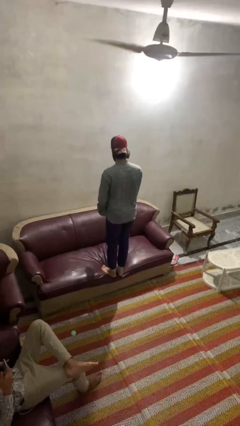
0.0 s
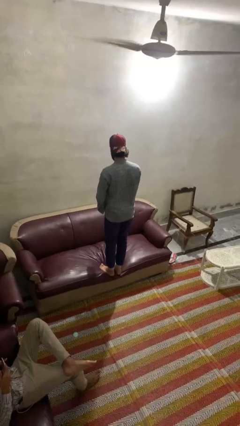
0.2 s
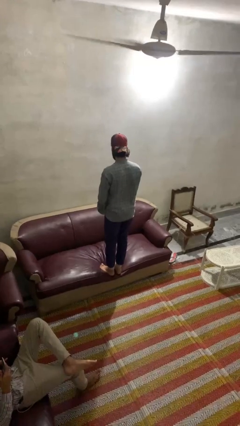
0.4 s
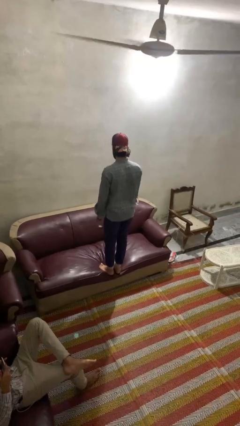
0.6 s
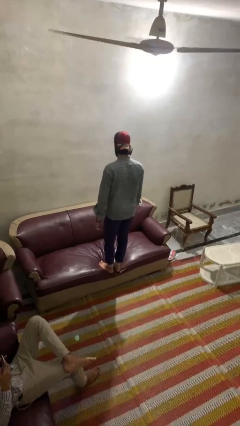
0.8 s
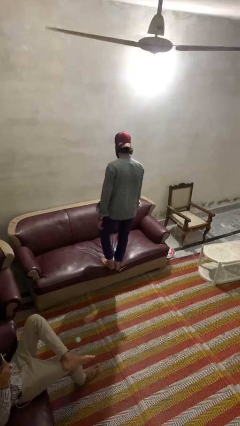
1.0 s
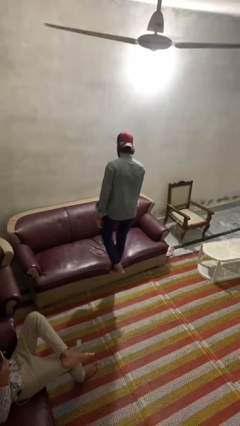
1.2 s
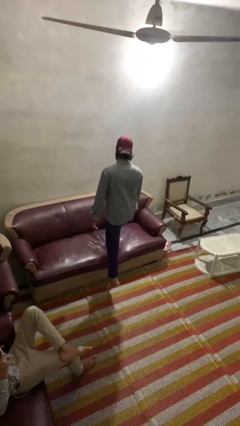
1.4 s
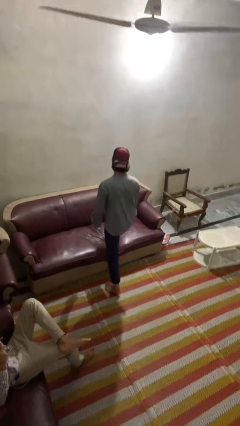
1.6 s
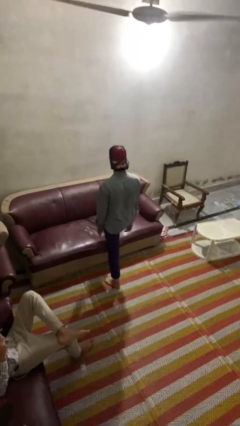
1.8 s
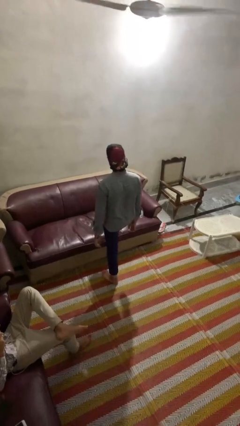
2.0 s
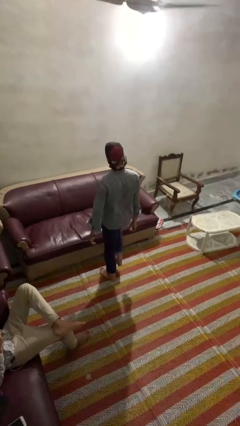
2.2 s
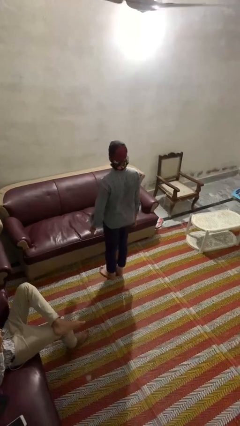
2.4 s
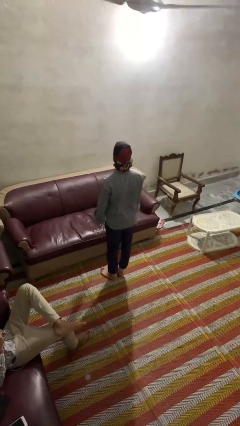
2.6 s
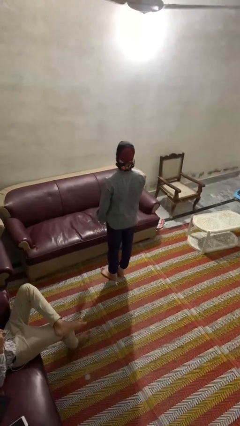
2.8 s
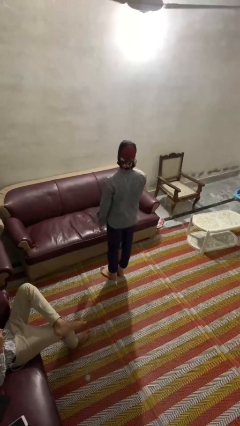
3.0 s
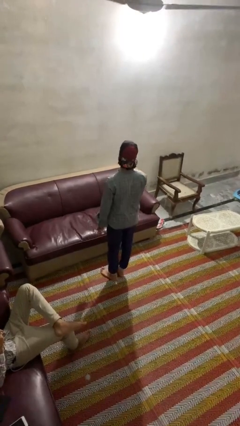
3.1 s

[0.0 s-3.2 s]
person climbs off couch

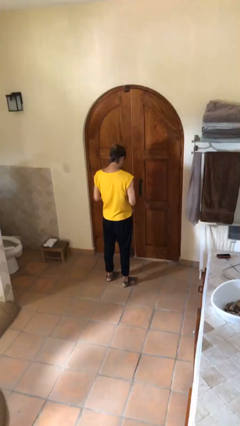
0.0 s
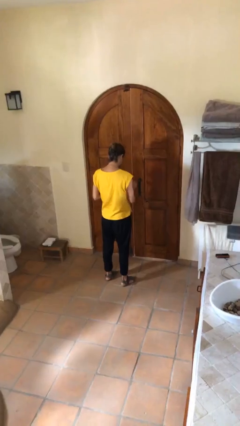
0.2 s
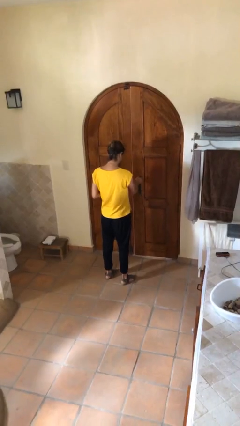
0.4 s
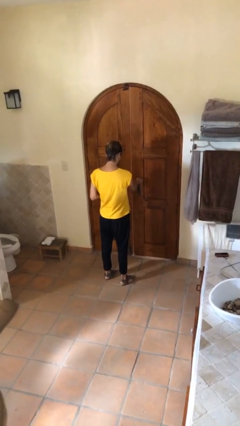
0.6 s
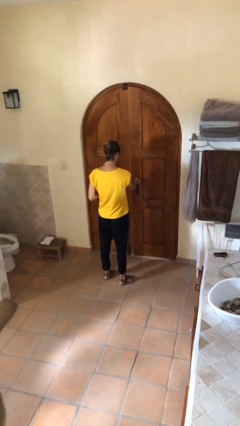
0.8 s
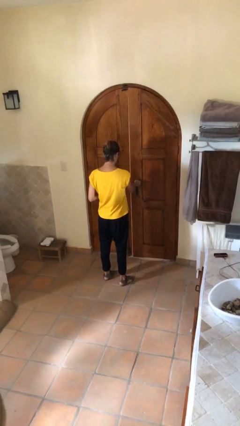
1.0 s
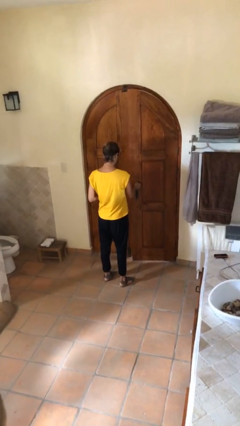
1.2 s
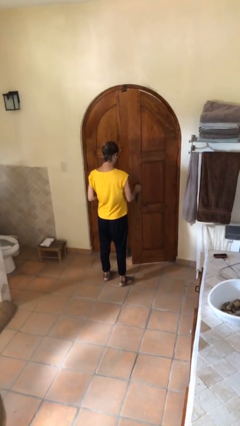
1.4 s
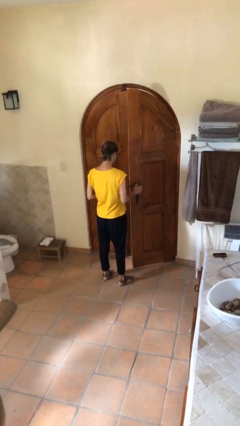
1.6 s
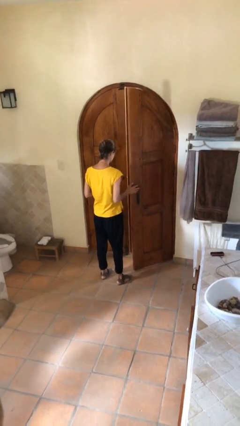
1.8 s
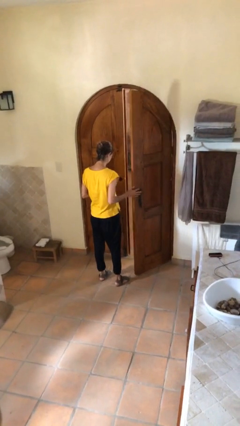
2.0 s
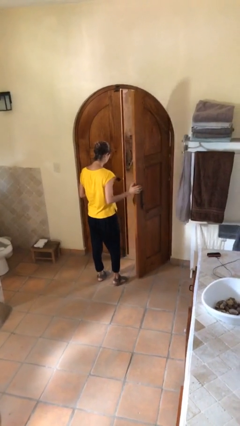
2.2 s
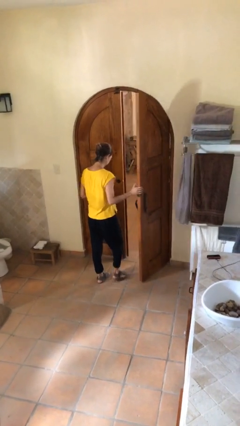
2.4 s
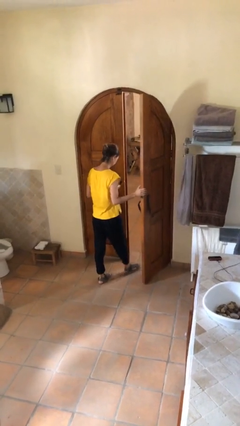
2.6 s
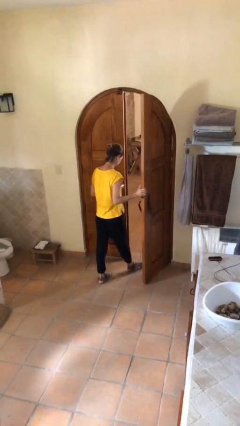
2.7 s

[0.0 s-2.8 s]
person opens facility door

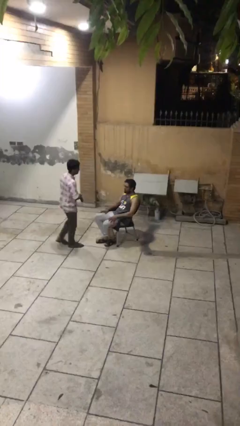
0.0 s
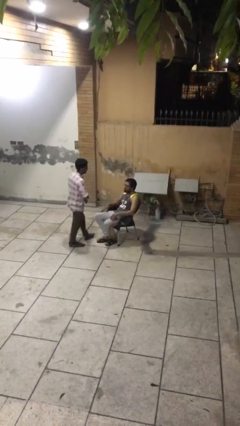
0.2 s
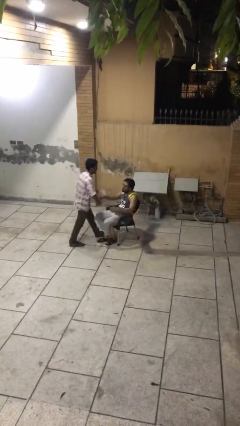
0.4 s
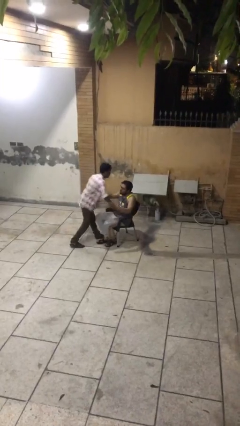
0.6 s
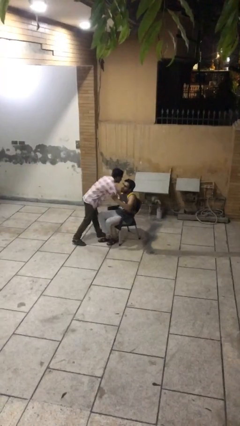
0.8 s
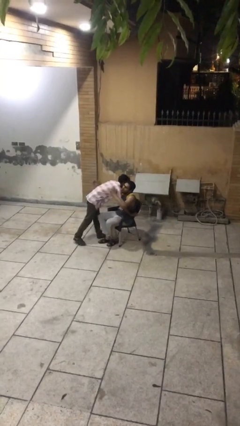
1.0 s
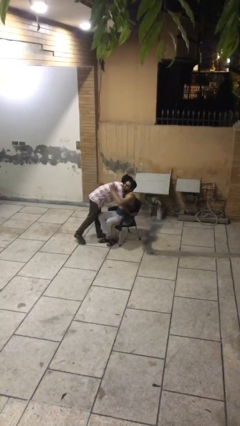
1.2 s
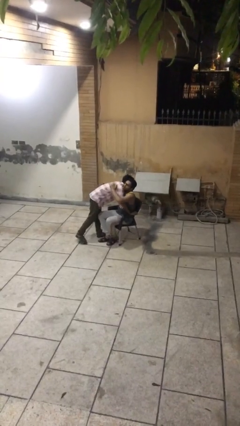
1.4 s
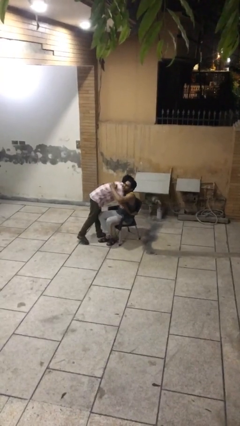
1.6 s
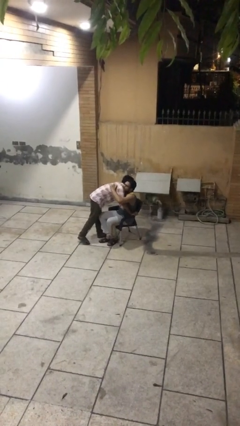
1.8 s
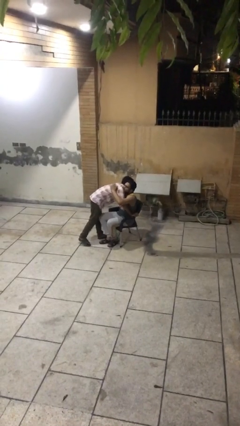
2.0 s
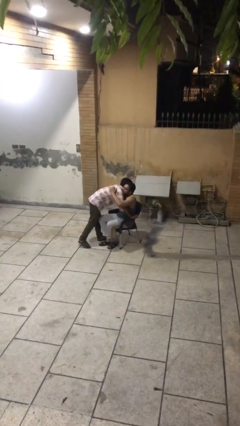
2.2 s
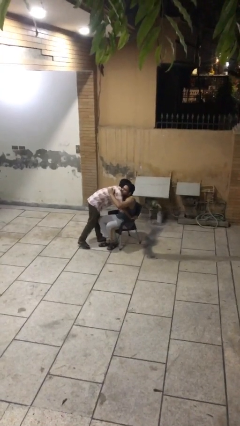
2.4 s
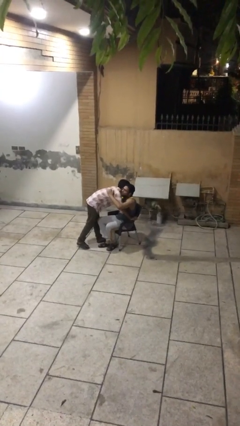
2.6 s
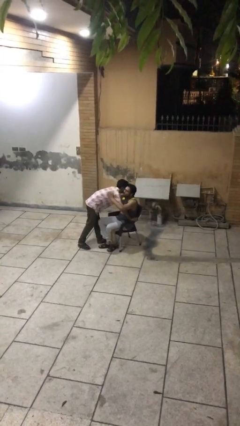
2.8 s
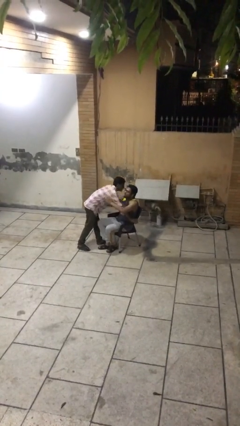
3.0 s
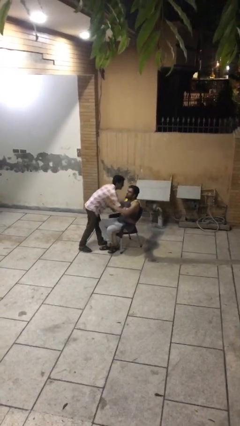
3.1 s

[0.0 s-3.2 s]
person embraces person

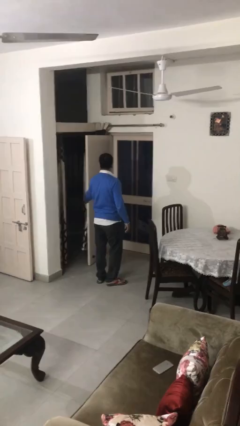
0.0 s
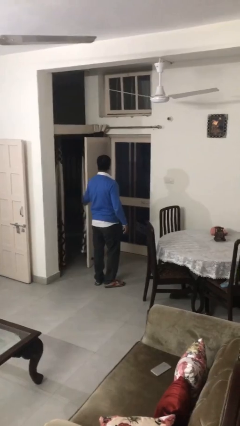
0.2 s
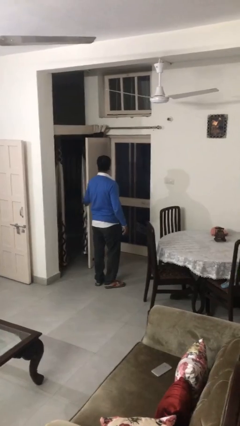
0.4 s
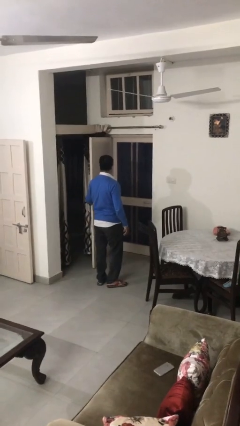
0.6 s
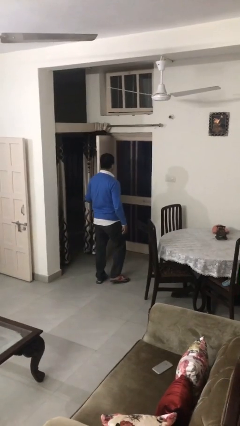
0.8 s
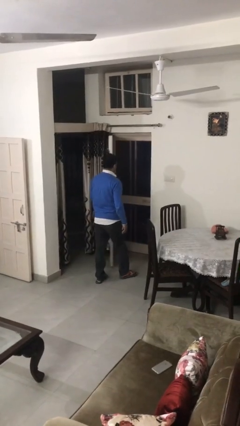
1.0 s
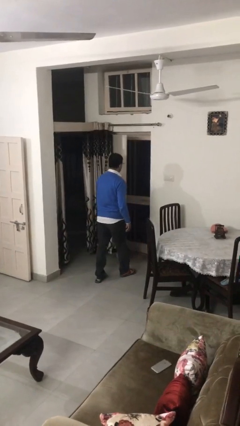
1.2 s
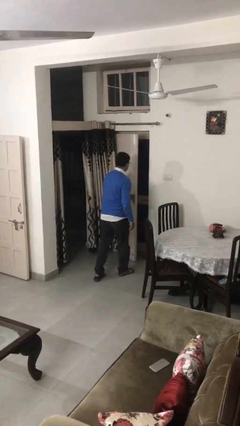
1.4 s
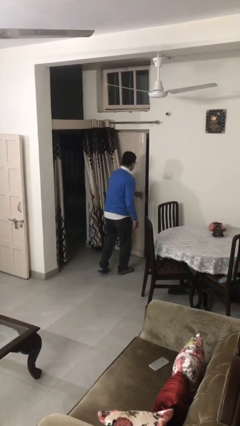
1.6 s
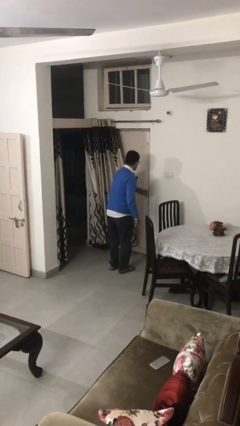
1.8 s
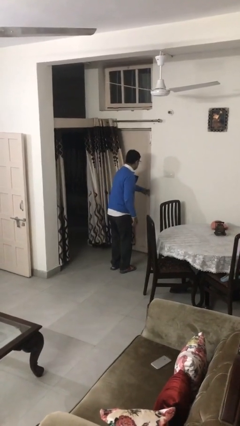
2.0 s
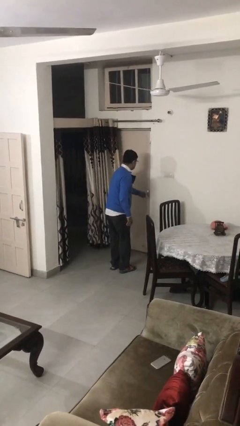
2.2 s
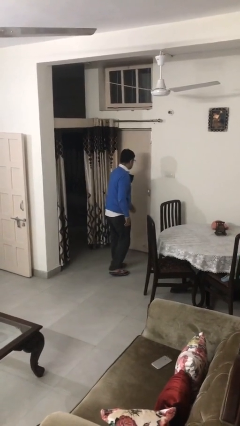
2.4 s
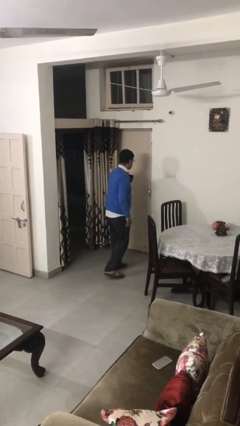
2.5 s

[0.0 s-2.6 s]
person closes facility door

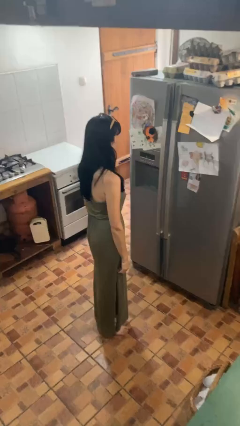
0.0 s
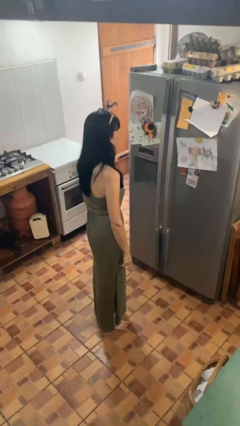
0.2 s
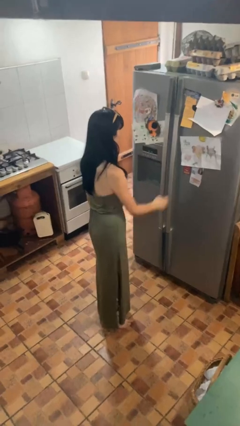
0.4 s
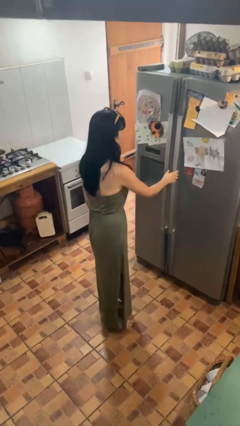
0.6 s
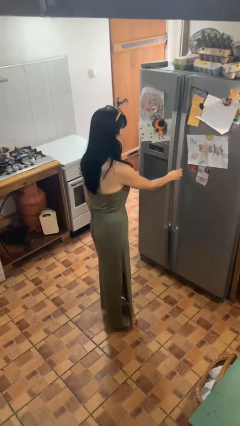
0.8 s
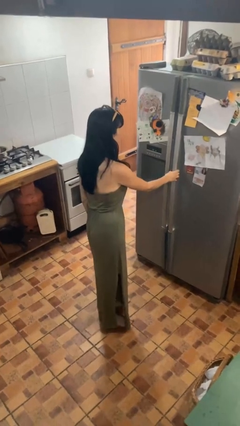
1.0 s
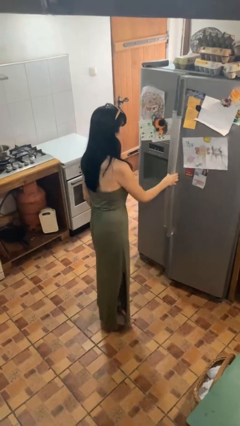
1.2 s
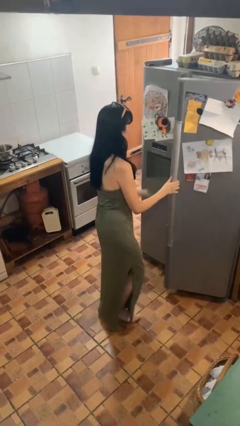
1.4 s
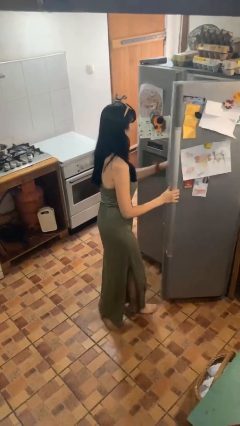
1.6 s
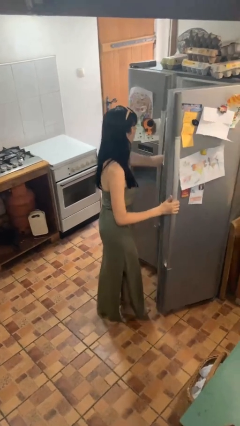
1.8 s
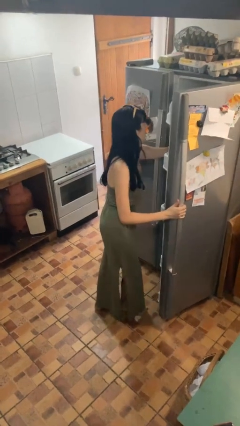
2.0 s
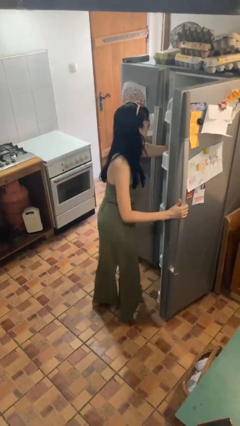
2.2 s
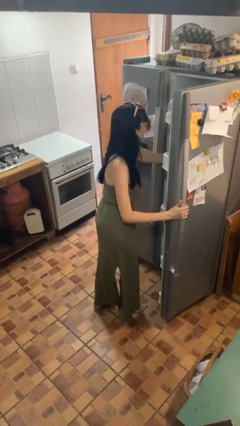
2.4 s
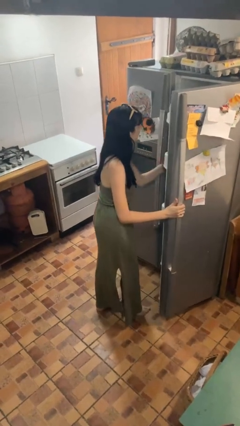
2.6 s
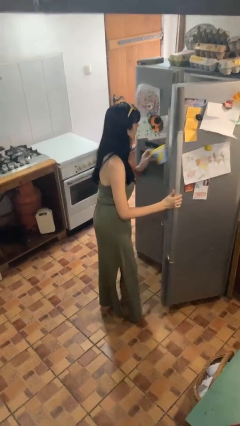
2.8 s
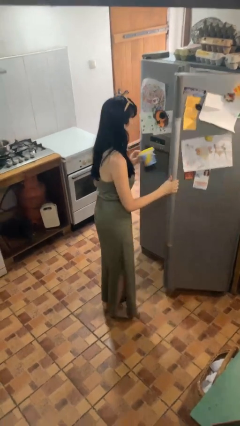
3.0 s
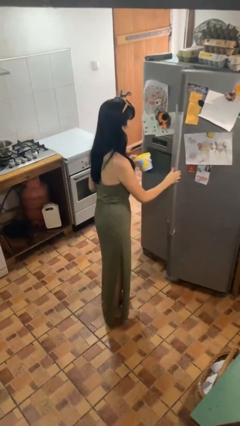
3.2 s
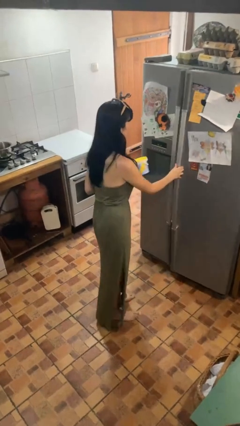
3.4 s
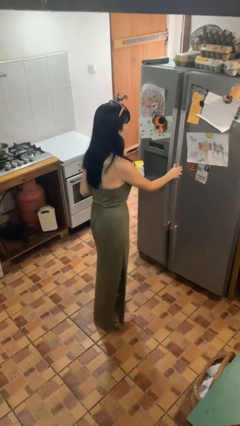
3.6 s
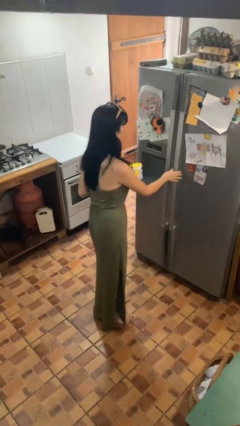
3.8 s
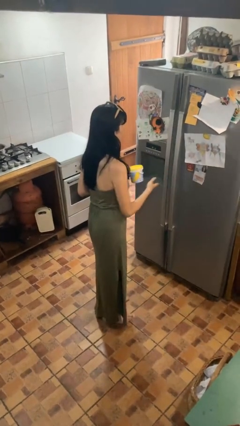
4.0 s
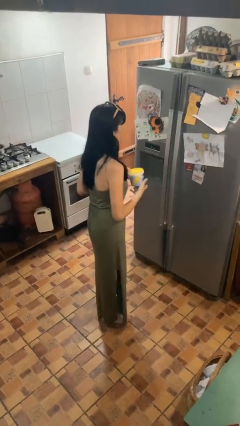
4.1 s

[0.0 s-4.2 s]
person takes object from refrigerator

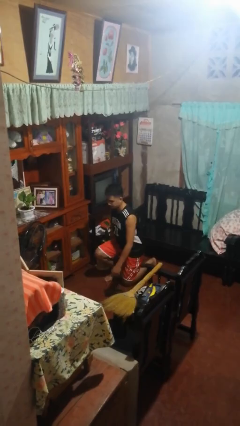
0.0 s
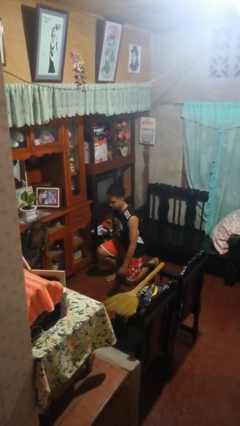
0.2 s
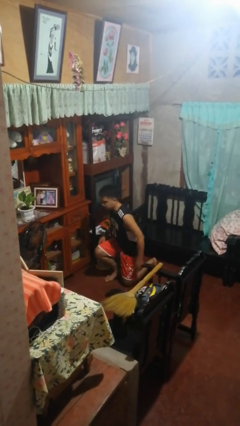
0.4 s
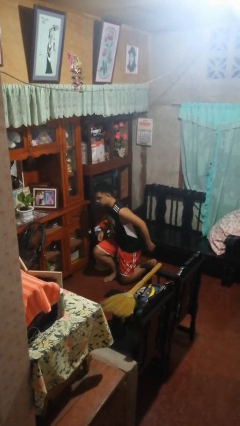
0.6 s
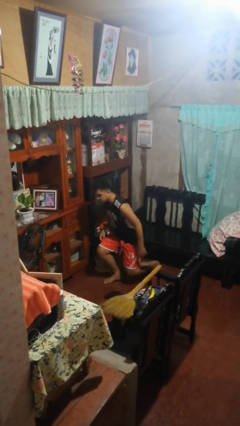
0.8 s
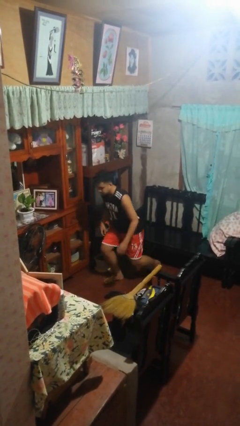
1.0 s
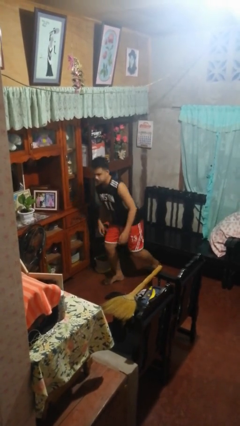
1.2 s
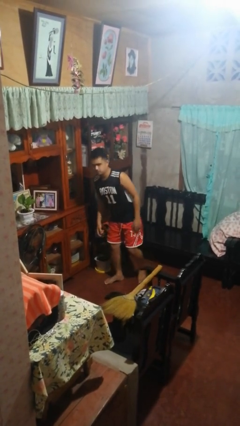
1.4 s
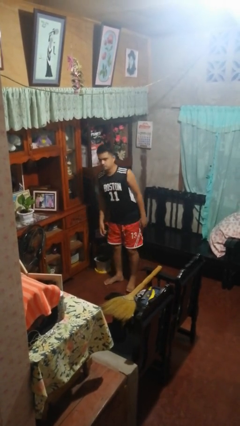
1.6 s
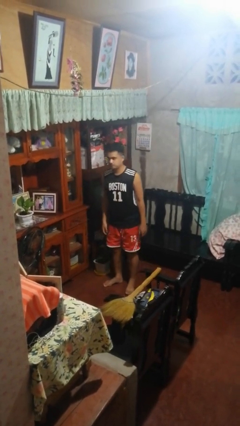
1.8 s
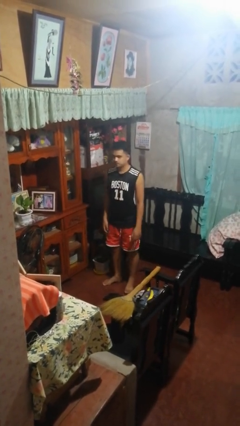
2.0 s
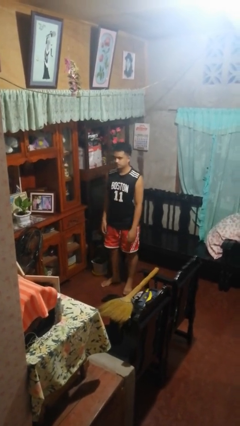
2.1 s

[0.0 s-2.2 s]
person stands up from floor
